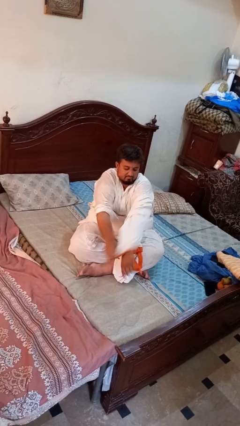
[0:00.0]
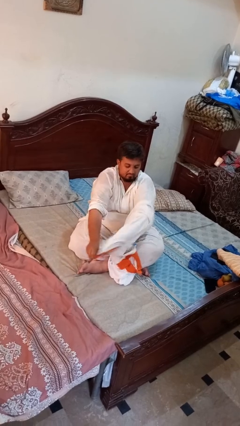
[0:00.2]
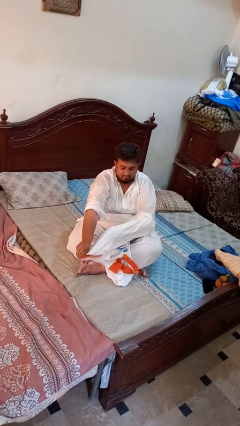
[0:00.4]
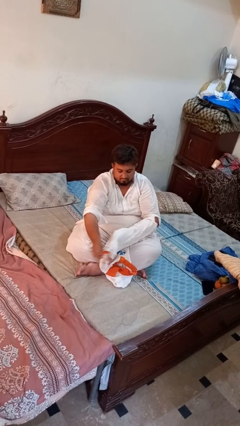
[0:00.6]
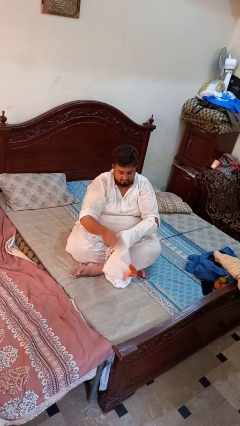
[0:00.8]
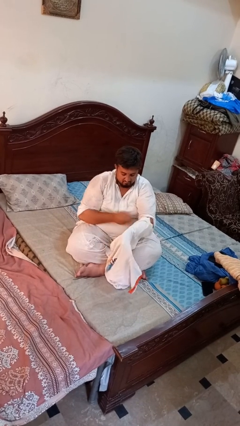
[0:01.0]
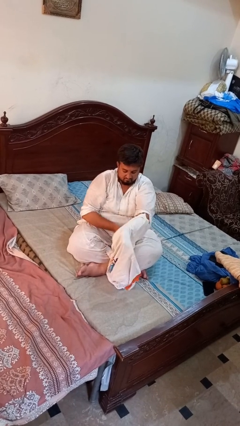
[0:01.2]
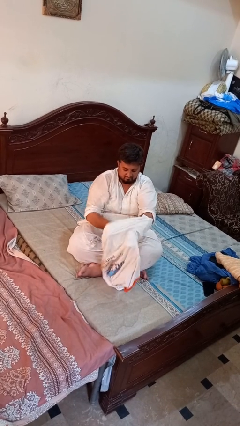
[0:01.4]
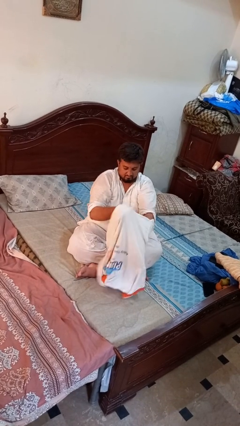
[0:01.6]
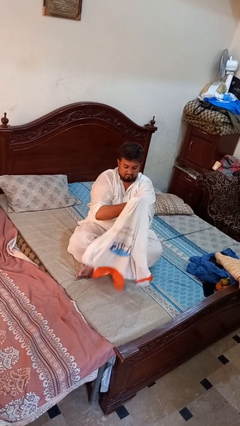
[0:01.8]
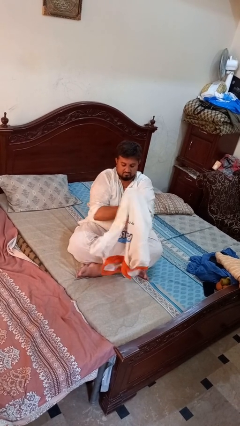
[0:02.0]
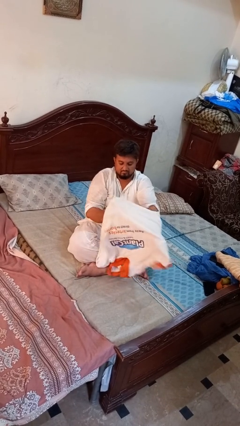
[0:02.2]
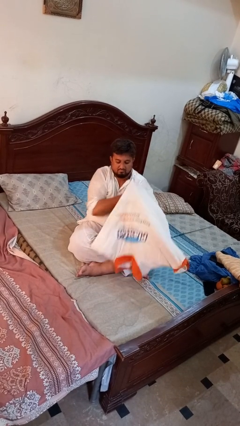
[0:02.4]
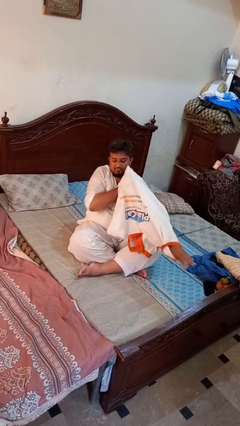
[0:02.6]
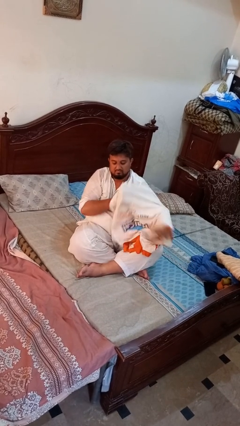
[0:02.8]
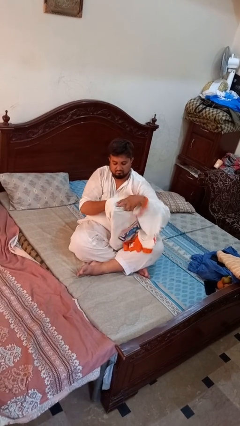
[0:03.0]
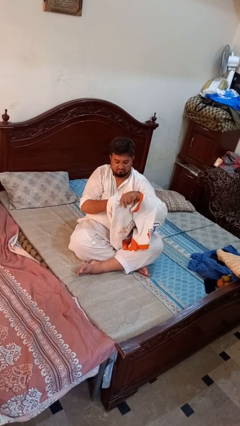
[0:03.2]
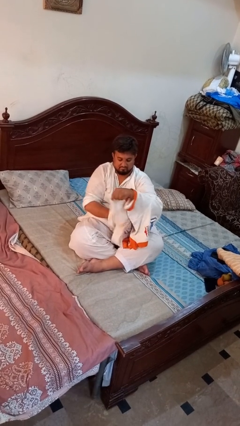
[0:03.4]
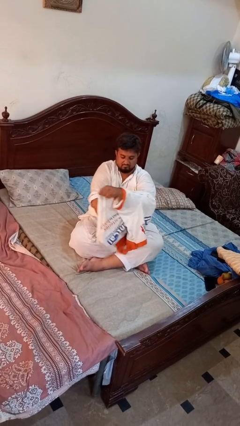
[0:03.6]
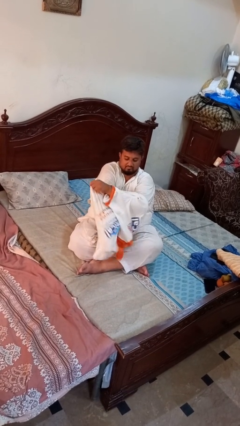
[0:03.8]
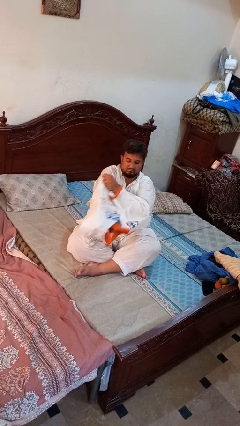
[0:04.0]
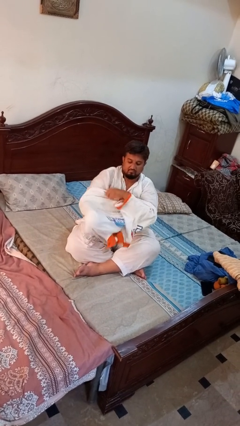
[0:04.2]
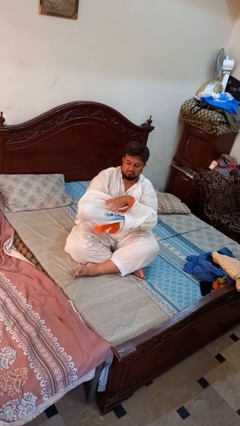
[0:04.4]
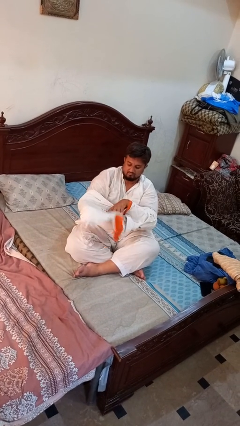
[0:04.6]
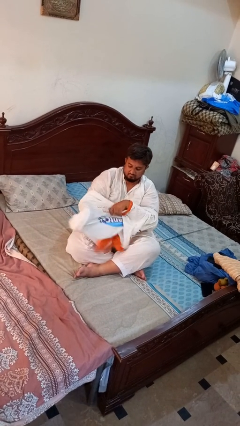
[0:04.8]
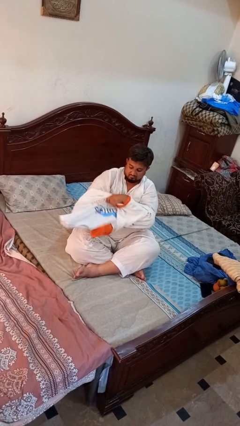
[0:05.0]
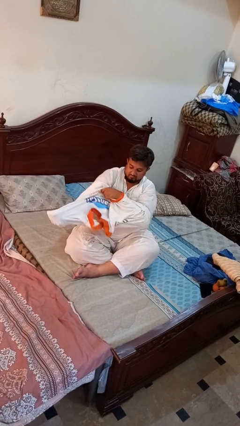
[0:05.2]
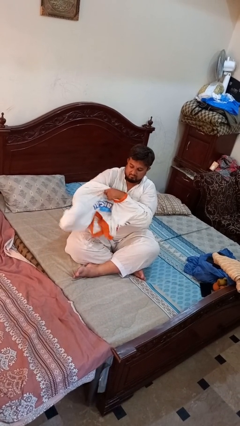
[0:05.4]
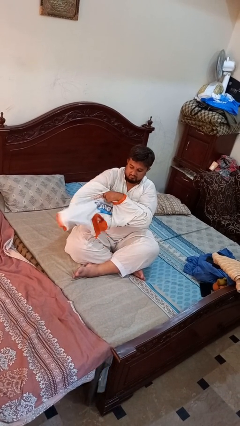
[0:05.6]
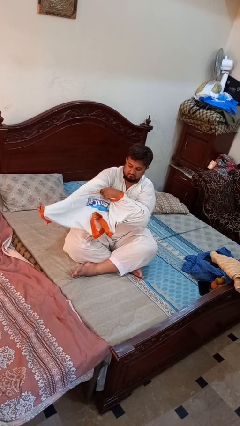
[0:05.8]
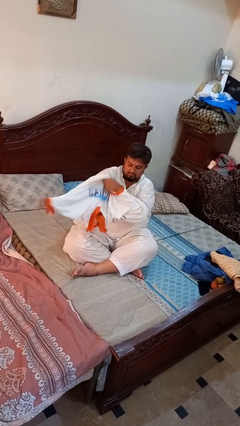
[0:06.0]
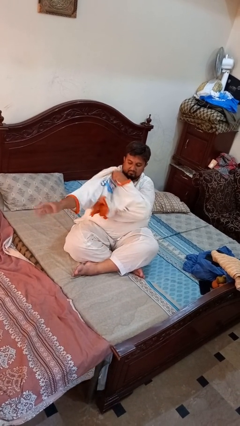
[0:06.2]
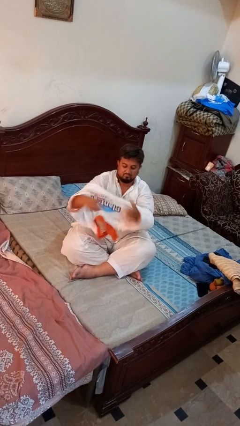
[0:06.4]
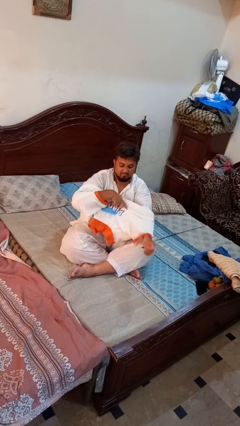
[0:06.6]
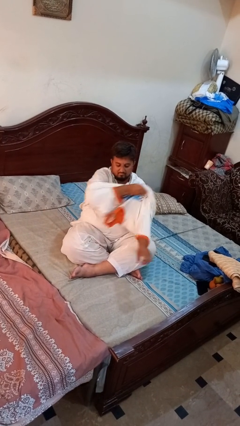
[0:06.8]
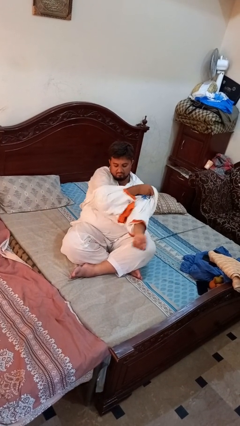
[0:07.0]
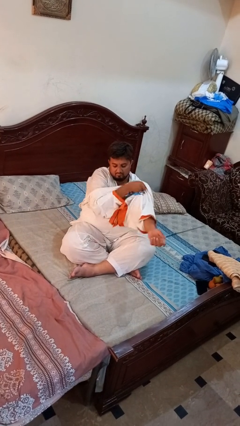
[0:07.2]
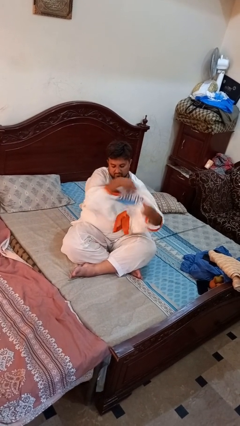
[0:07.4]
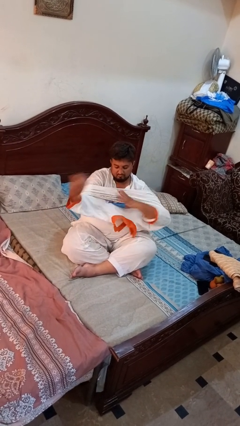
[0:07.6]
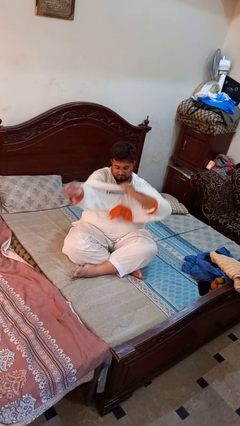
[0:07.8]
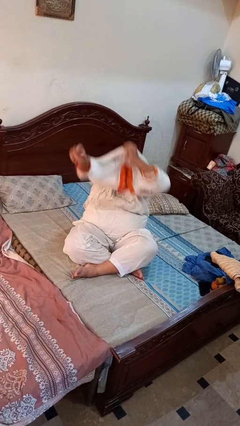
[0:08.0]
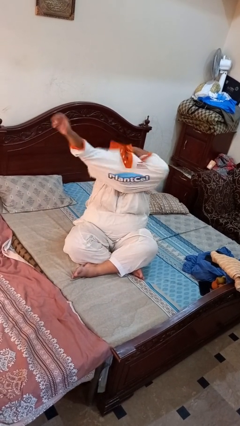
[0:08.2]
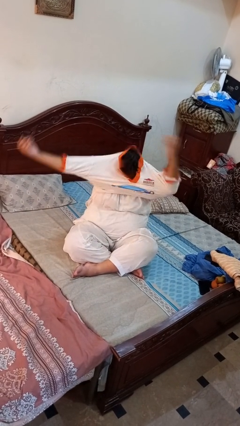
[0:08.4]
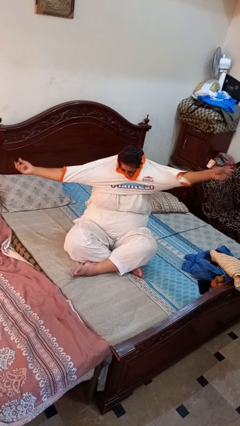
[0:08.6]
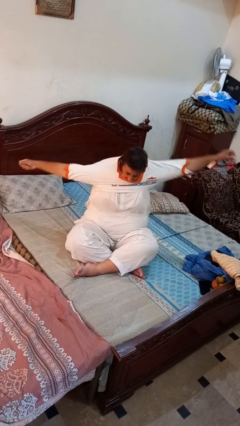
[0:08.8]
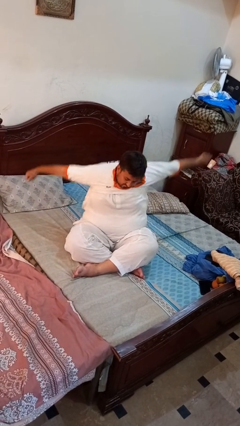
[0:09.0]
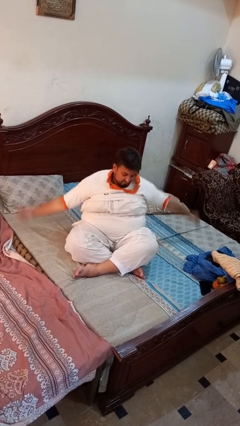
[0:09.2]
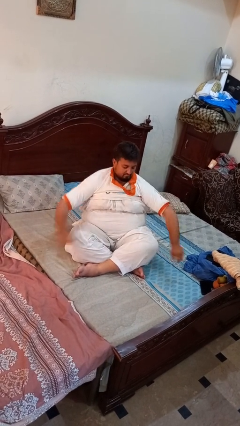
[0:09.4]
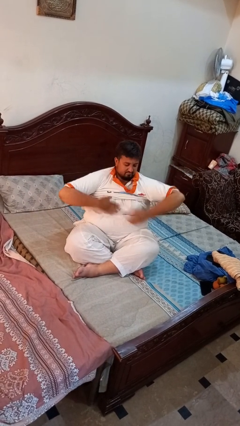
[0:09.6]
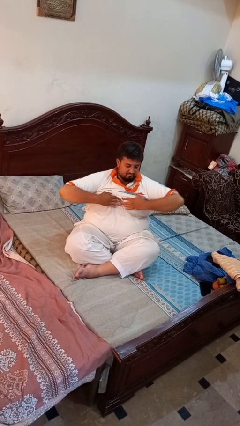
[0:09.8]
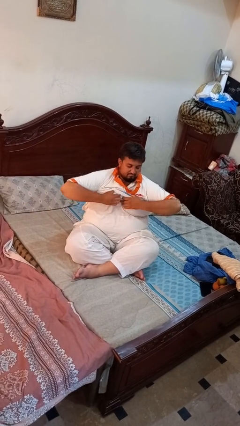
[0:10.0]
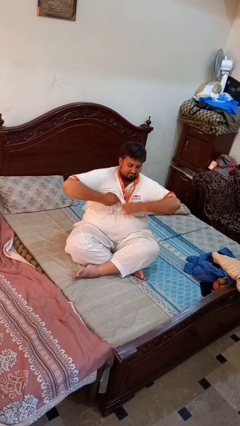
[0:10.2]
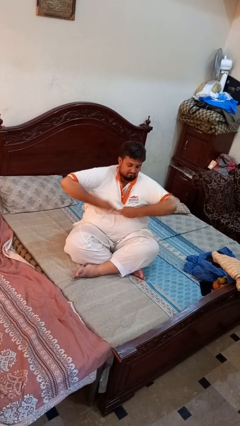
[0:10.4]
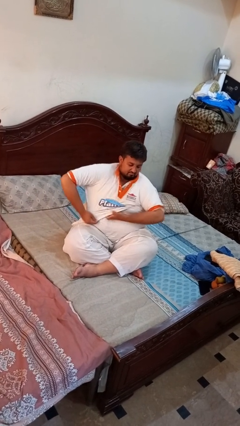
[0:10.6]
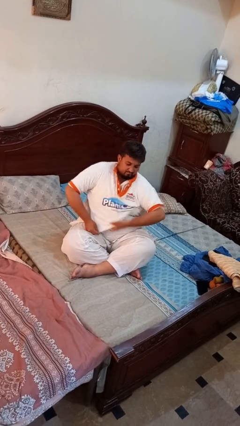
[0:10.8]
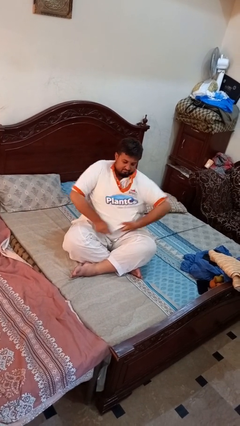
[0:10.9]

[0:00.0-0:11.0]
person puts on shirt

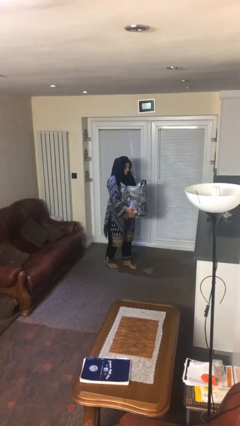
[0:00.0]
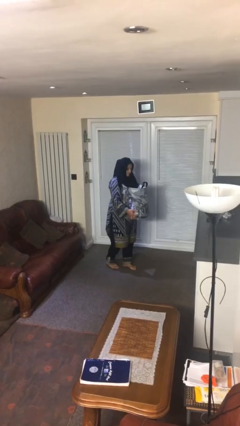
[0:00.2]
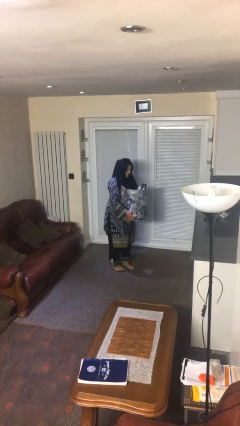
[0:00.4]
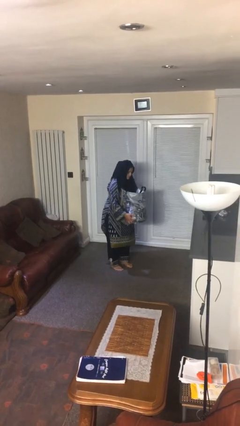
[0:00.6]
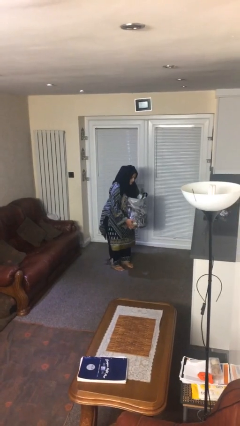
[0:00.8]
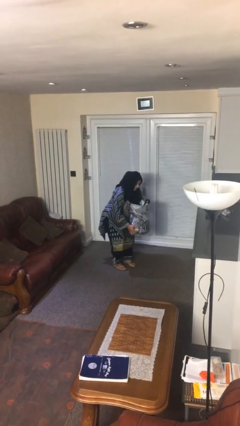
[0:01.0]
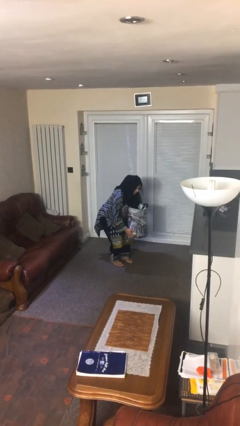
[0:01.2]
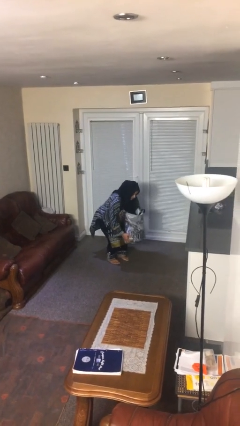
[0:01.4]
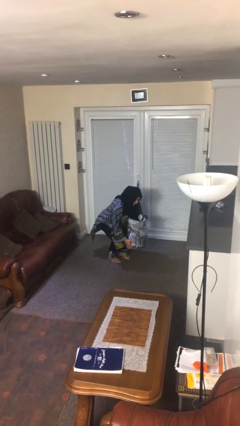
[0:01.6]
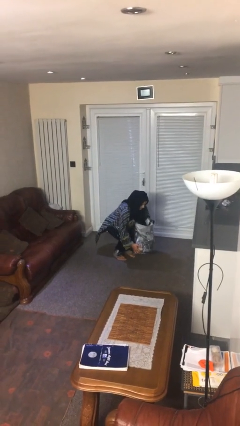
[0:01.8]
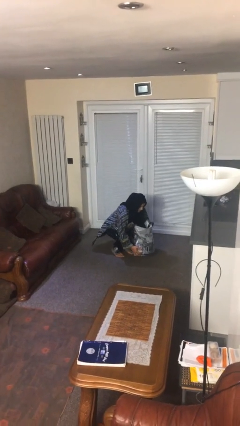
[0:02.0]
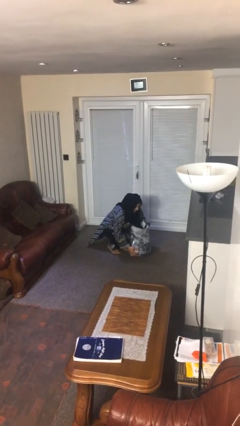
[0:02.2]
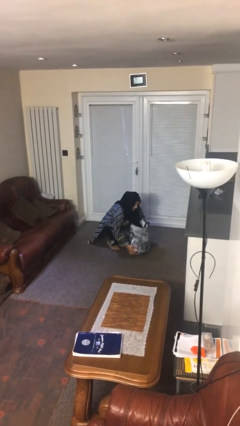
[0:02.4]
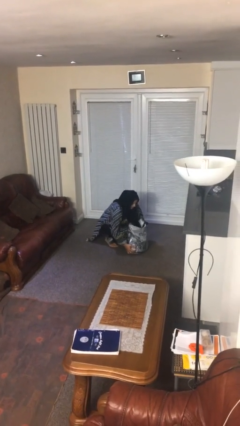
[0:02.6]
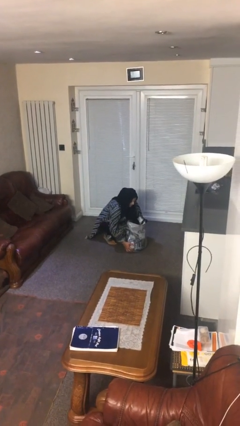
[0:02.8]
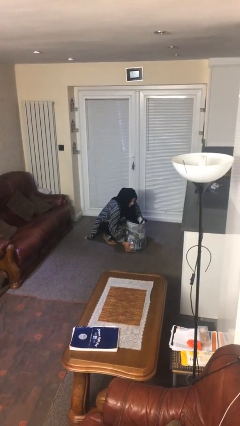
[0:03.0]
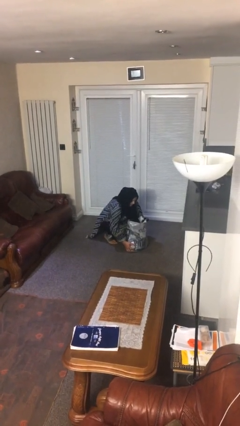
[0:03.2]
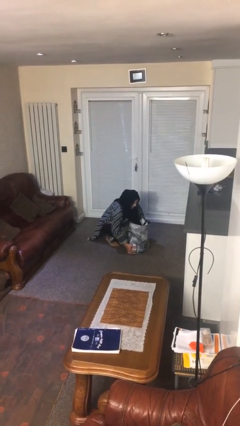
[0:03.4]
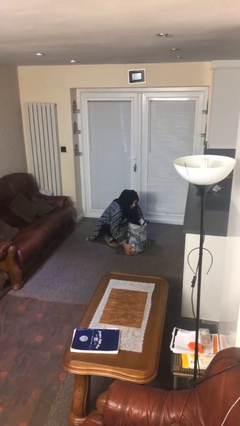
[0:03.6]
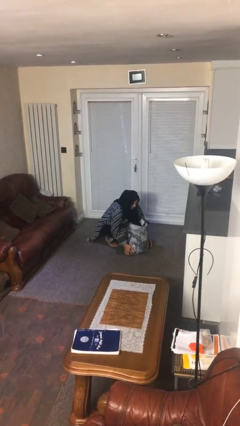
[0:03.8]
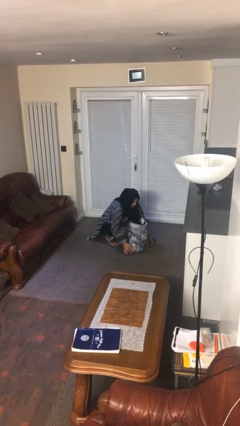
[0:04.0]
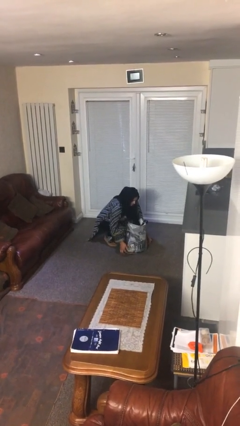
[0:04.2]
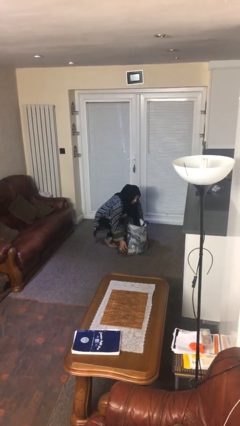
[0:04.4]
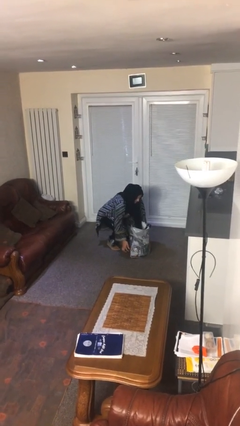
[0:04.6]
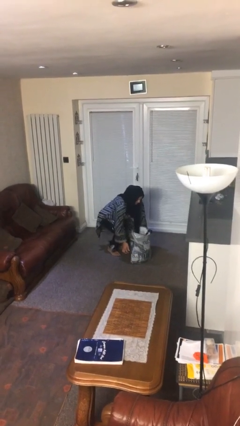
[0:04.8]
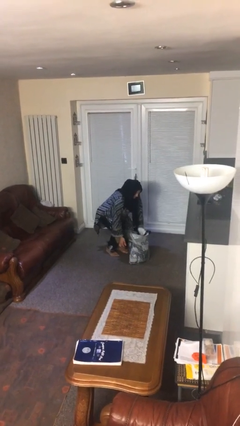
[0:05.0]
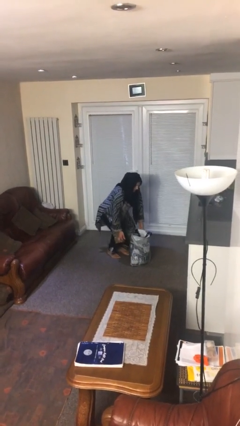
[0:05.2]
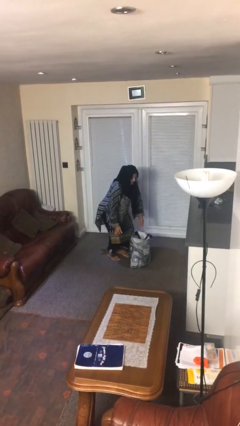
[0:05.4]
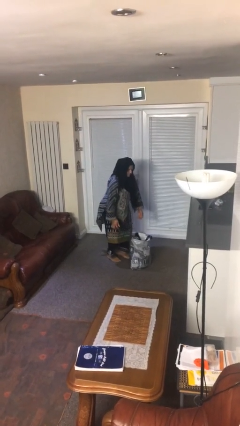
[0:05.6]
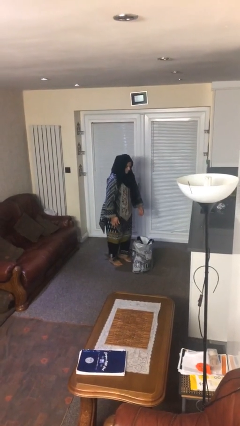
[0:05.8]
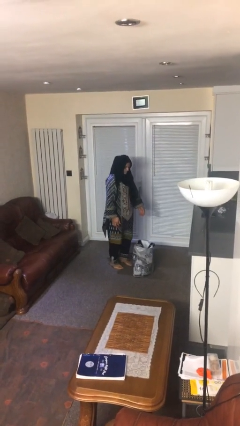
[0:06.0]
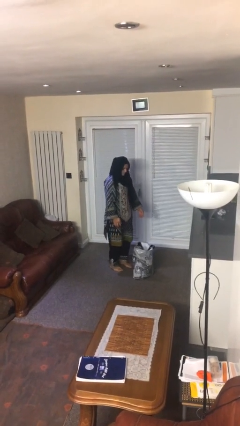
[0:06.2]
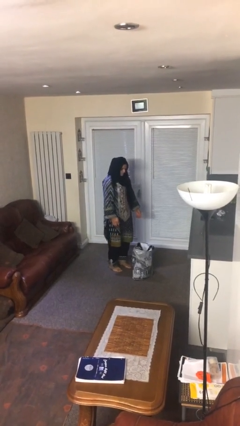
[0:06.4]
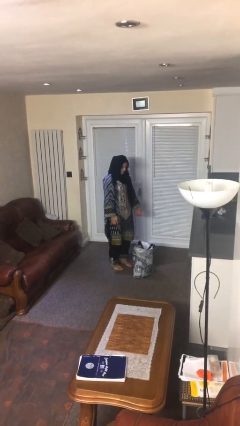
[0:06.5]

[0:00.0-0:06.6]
person puts down object on floor

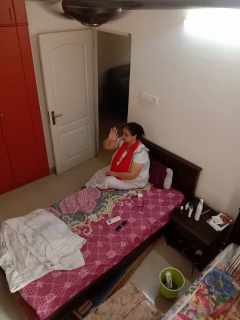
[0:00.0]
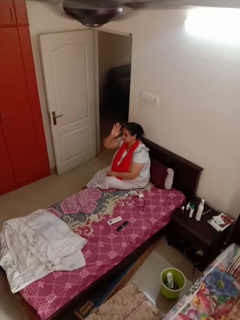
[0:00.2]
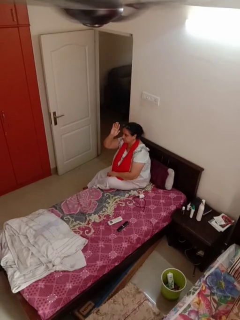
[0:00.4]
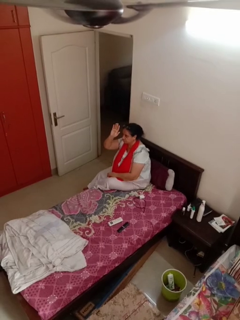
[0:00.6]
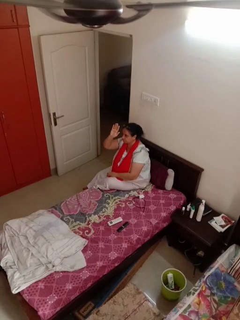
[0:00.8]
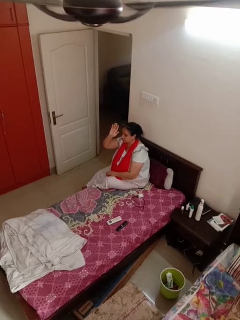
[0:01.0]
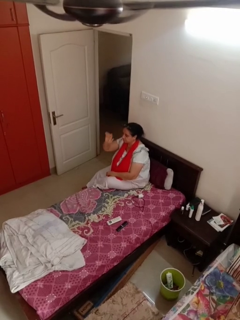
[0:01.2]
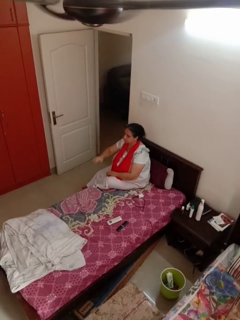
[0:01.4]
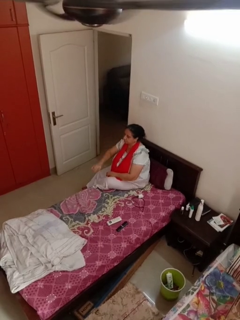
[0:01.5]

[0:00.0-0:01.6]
person gestures raise hand
